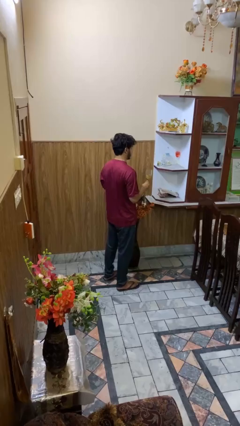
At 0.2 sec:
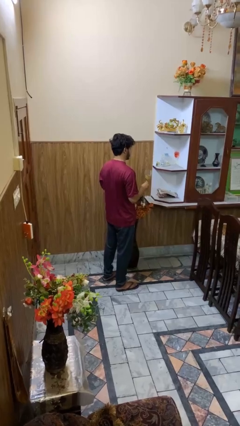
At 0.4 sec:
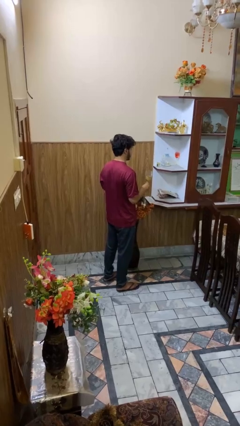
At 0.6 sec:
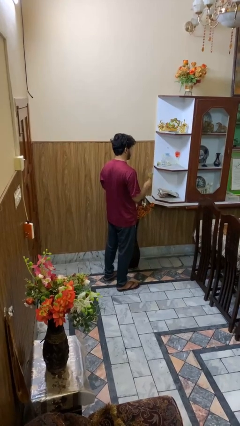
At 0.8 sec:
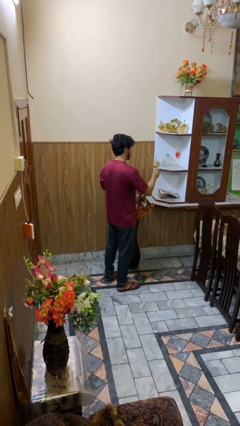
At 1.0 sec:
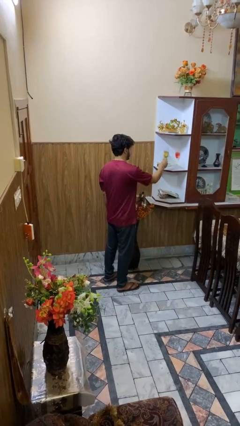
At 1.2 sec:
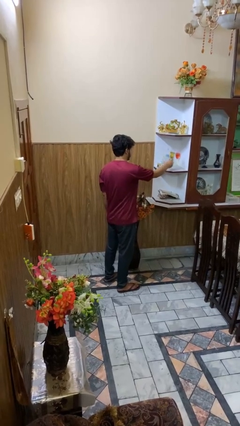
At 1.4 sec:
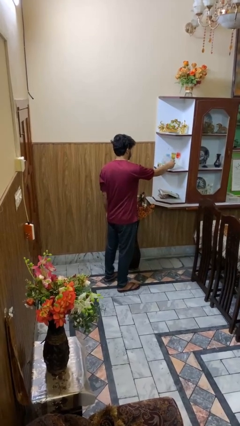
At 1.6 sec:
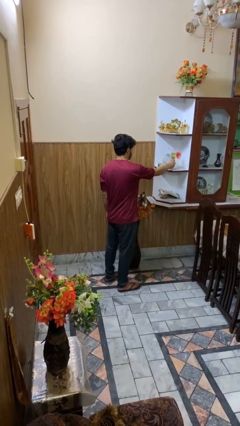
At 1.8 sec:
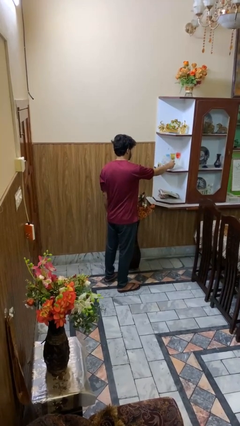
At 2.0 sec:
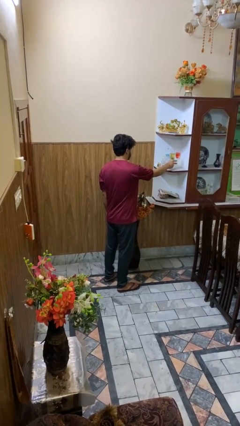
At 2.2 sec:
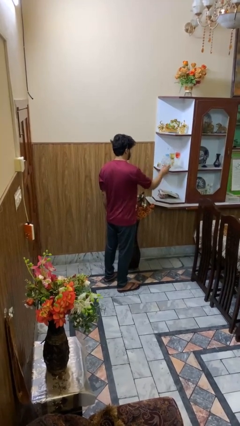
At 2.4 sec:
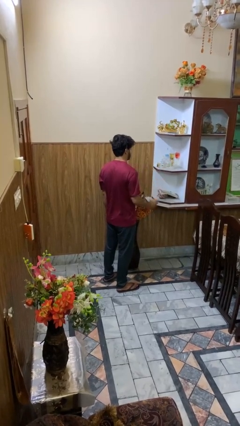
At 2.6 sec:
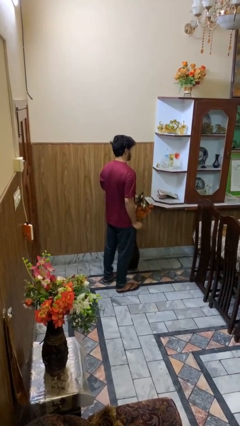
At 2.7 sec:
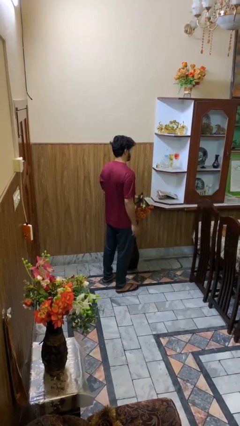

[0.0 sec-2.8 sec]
person puts down object into cabinet

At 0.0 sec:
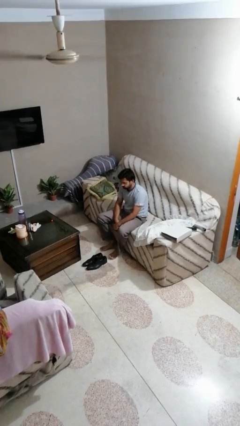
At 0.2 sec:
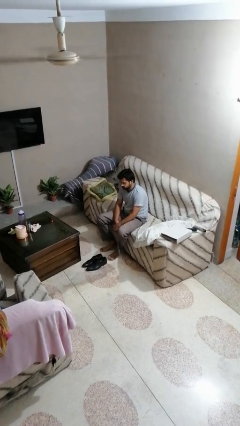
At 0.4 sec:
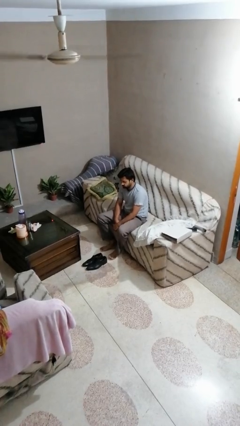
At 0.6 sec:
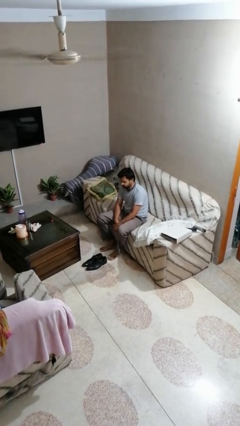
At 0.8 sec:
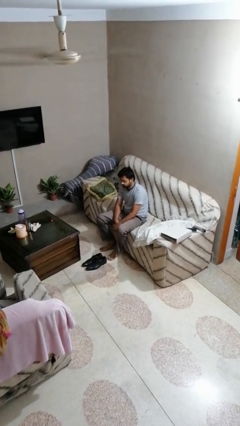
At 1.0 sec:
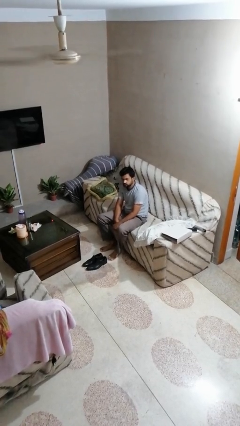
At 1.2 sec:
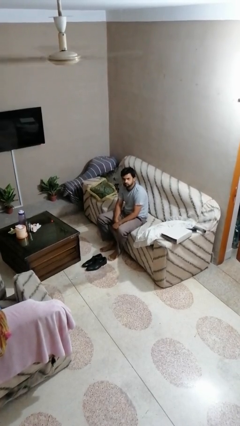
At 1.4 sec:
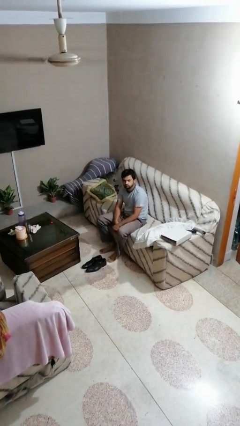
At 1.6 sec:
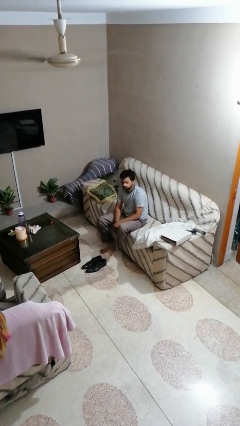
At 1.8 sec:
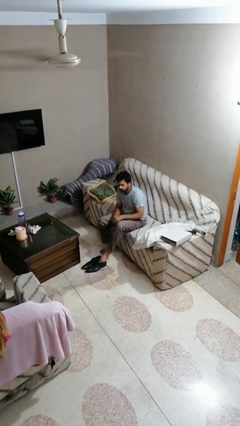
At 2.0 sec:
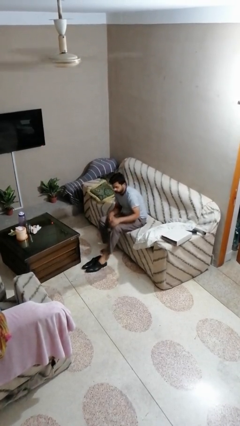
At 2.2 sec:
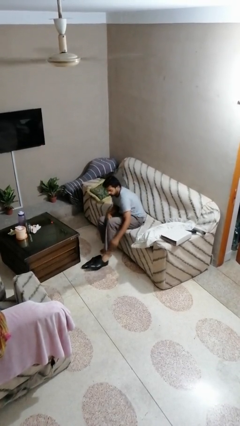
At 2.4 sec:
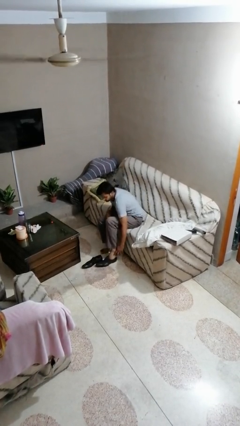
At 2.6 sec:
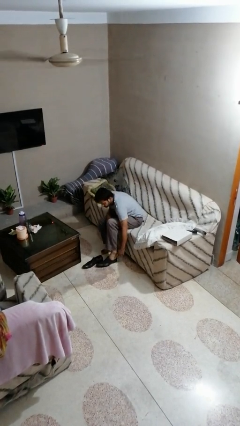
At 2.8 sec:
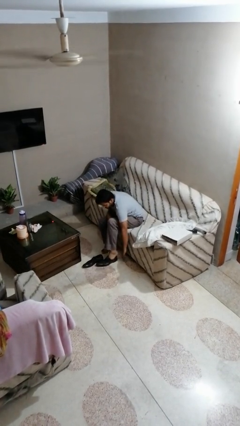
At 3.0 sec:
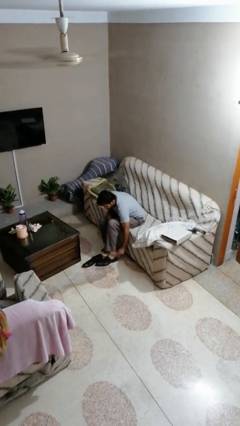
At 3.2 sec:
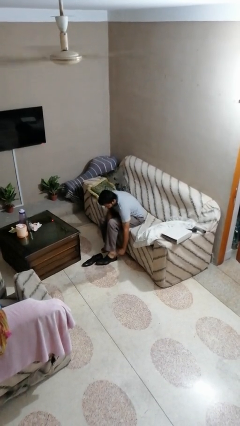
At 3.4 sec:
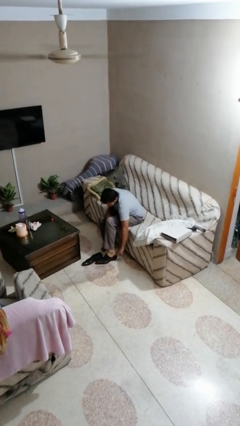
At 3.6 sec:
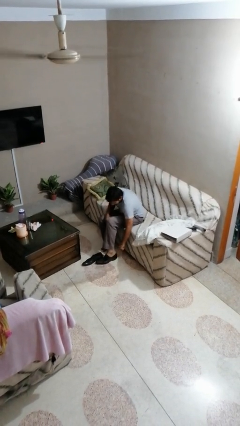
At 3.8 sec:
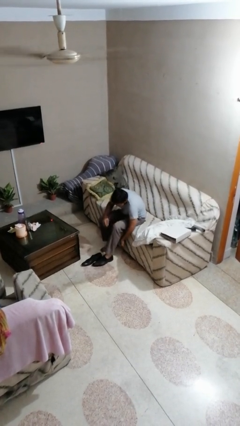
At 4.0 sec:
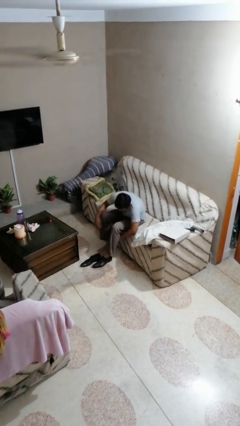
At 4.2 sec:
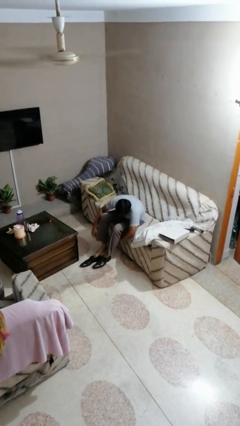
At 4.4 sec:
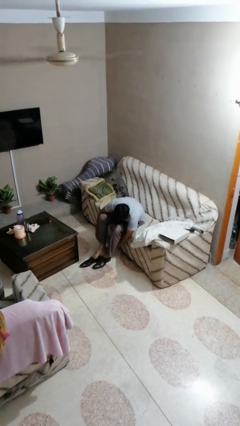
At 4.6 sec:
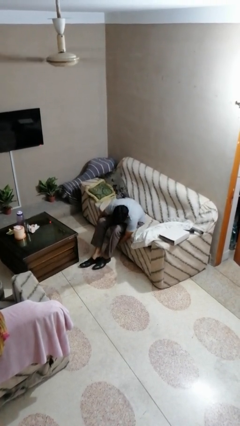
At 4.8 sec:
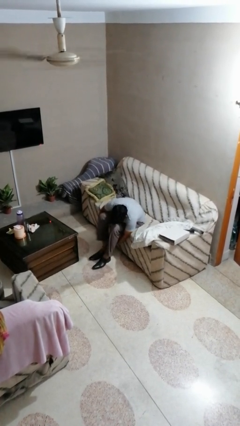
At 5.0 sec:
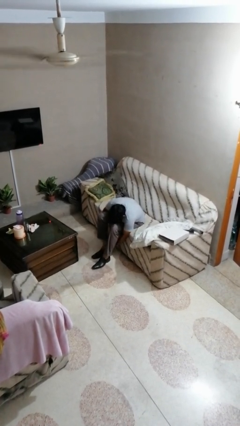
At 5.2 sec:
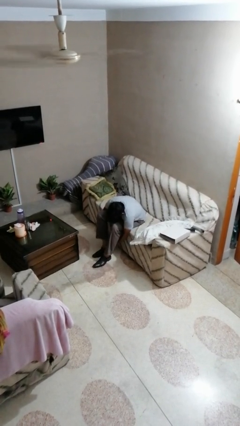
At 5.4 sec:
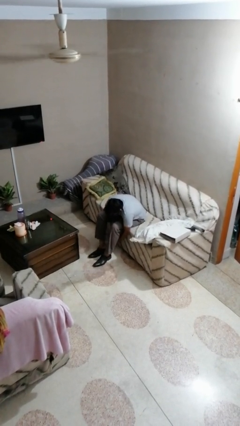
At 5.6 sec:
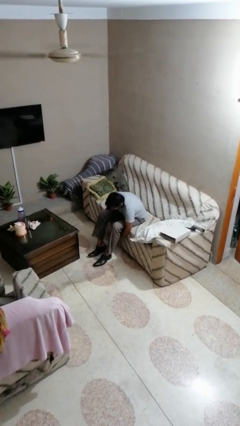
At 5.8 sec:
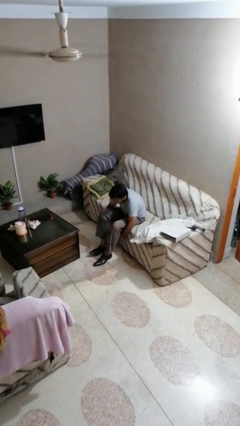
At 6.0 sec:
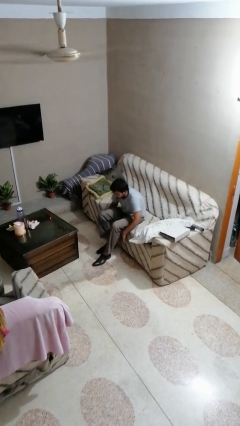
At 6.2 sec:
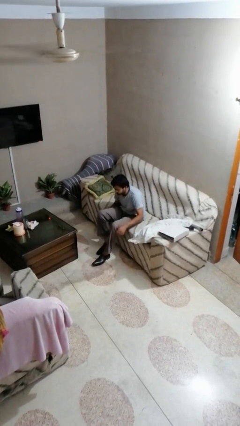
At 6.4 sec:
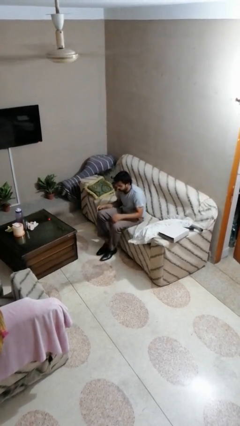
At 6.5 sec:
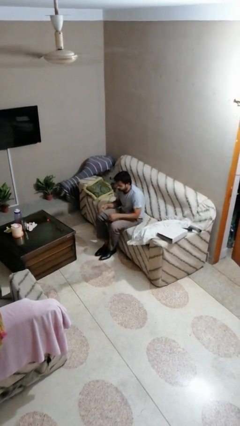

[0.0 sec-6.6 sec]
person puts on shoes

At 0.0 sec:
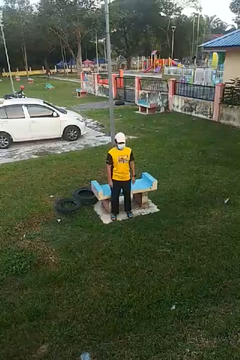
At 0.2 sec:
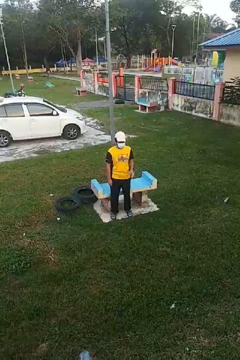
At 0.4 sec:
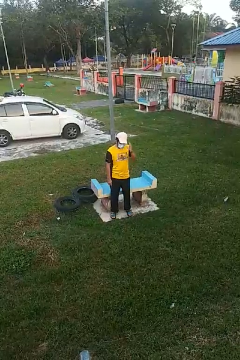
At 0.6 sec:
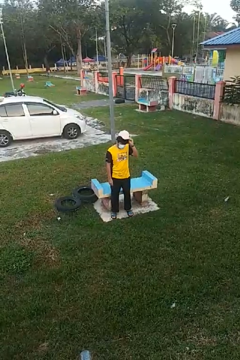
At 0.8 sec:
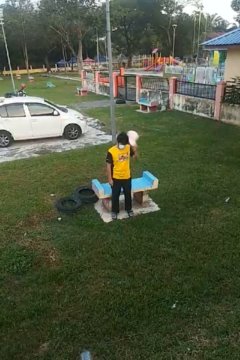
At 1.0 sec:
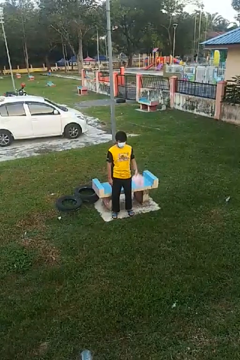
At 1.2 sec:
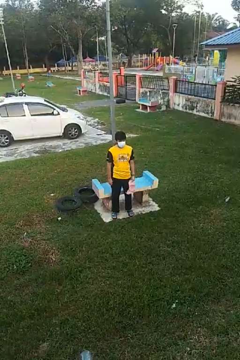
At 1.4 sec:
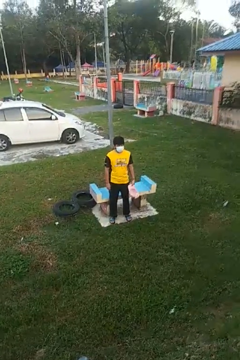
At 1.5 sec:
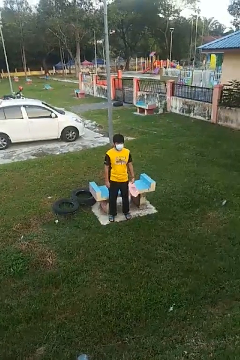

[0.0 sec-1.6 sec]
person takes off hat

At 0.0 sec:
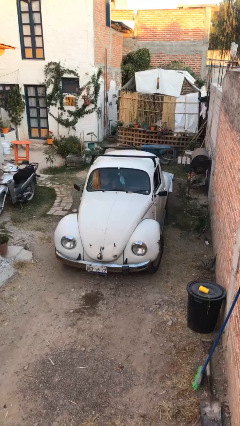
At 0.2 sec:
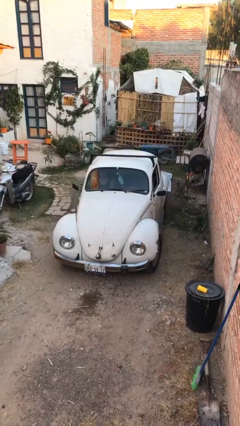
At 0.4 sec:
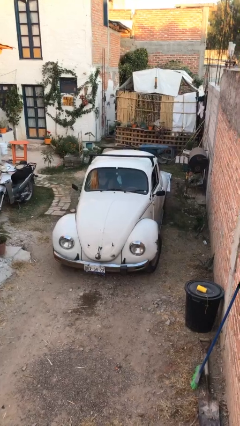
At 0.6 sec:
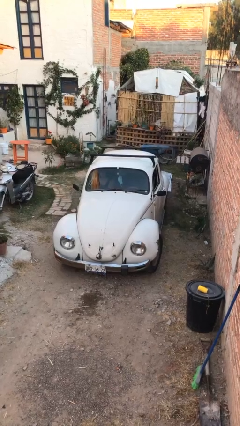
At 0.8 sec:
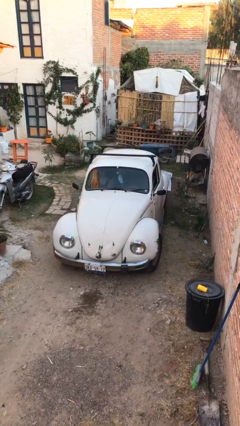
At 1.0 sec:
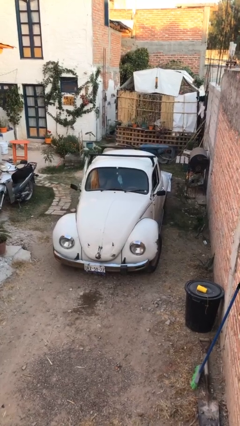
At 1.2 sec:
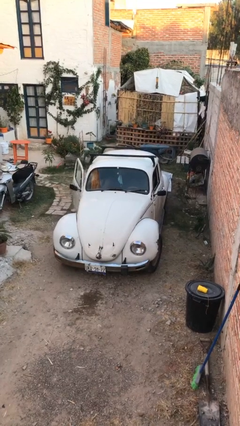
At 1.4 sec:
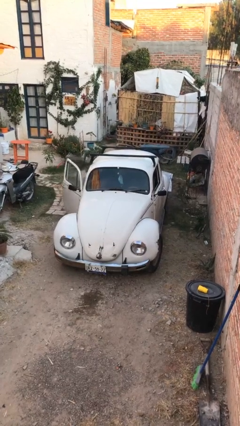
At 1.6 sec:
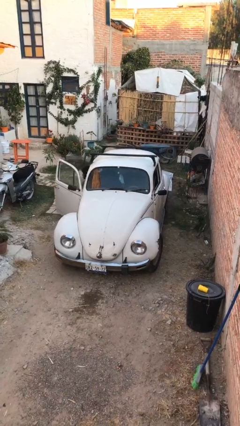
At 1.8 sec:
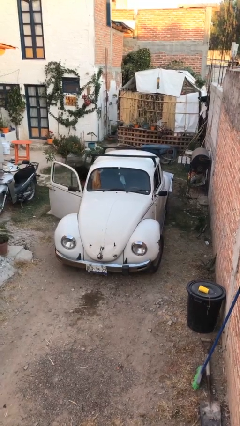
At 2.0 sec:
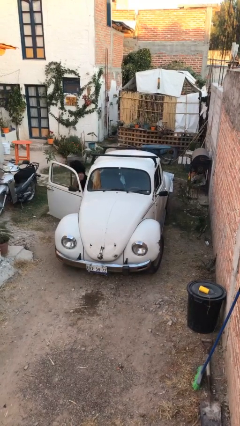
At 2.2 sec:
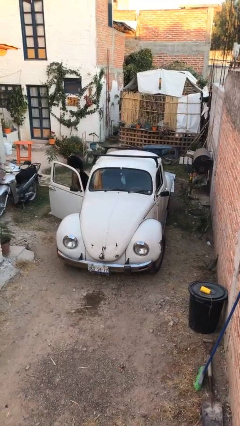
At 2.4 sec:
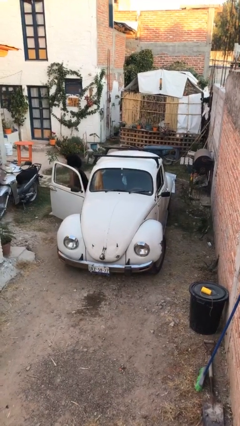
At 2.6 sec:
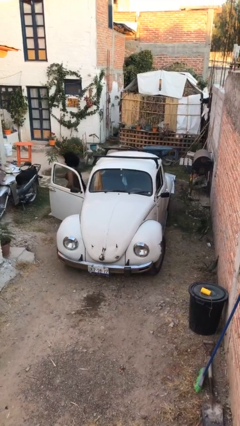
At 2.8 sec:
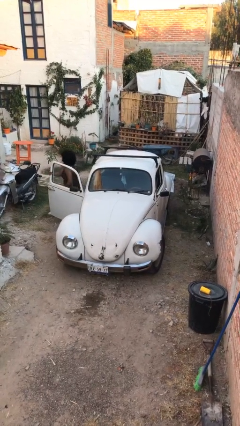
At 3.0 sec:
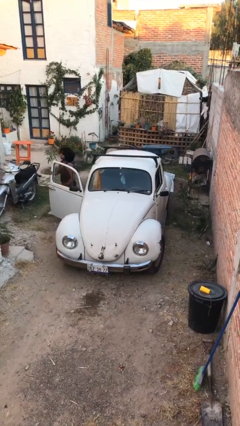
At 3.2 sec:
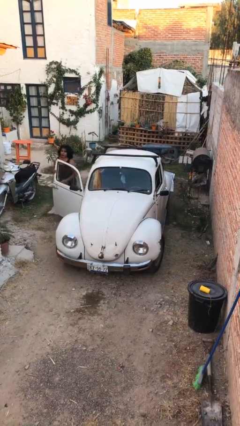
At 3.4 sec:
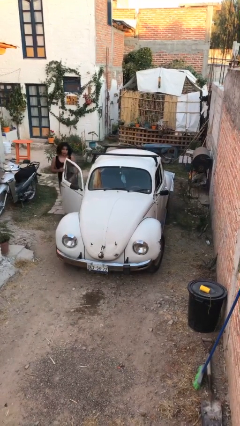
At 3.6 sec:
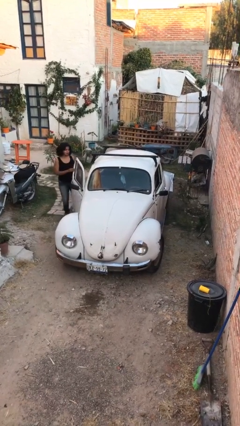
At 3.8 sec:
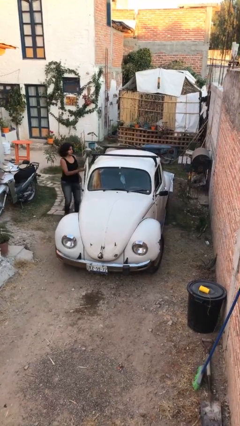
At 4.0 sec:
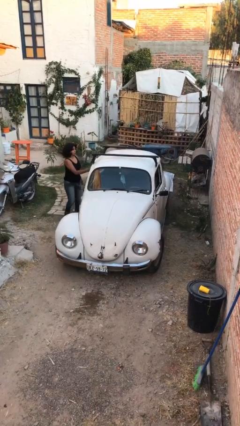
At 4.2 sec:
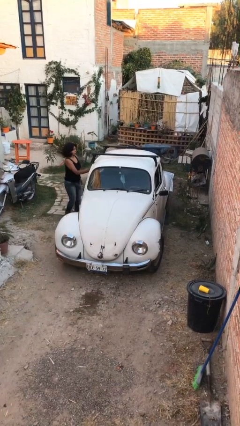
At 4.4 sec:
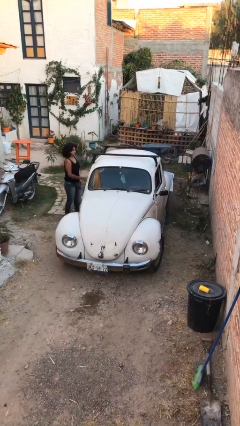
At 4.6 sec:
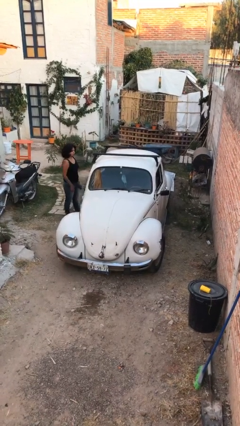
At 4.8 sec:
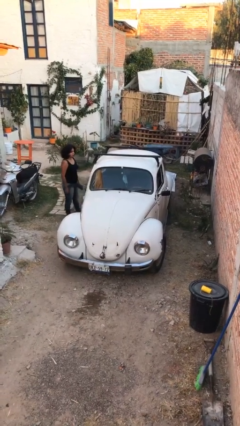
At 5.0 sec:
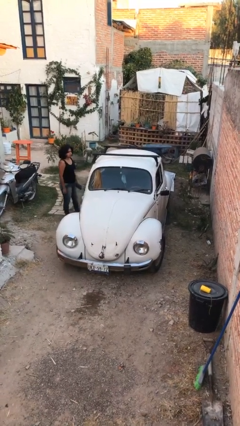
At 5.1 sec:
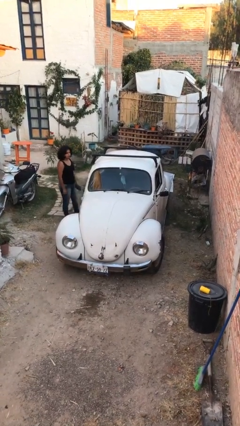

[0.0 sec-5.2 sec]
car drops off person

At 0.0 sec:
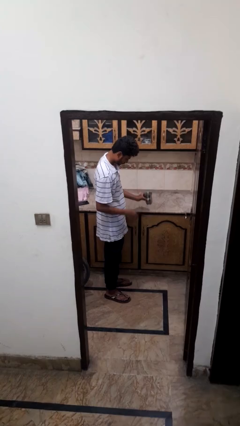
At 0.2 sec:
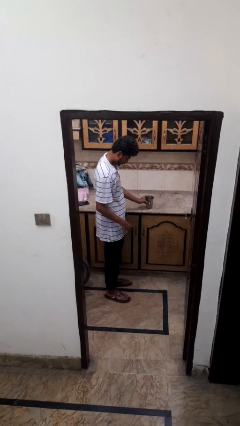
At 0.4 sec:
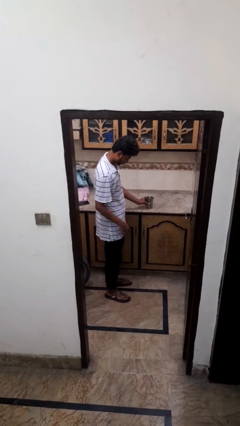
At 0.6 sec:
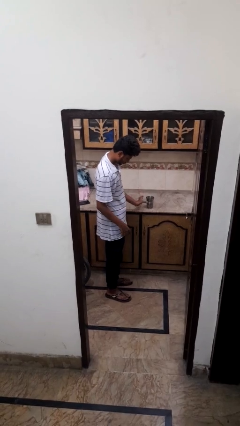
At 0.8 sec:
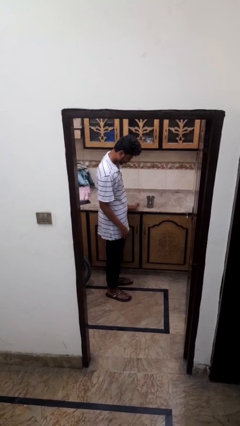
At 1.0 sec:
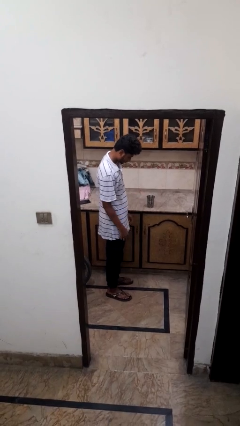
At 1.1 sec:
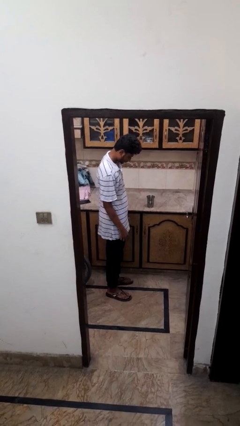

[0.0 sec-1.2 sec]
person puts down object on countertop

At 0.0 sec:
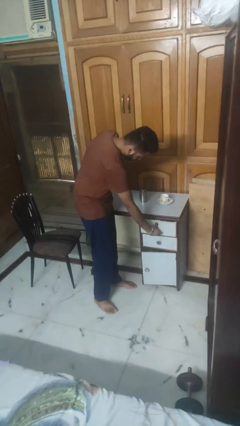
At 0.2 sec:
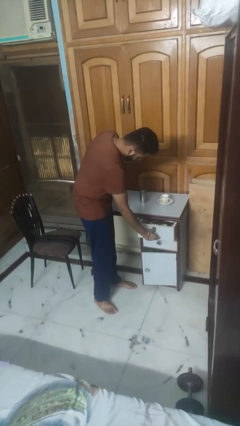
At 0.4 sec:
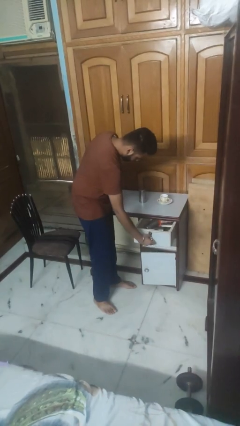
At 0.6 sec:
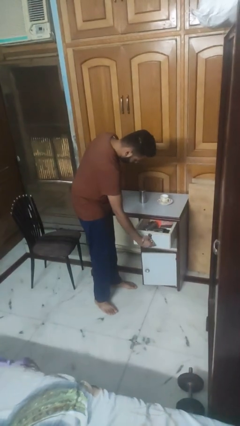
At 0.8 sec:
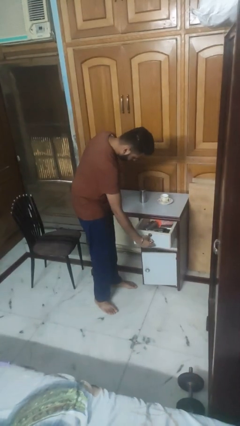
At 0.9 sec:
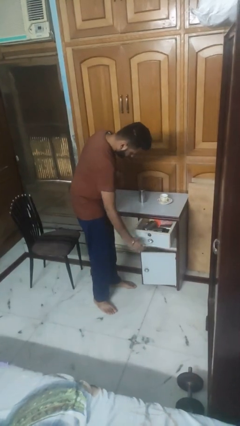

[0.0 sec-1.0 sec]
person opens kitchen drawer
